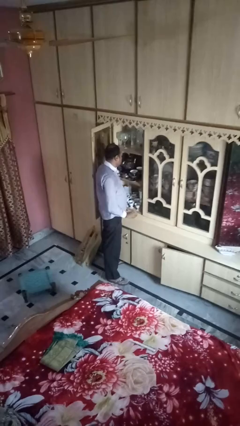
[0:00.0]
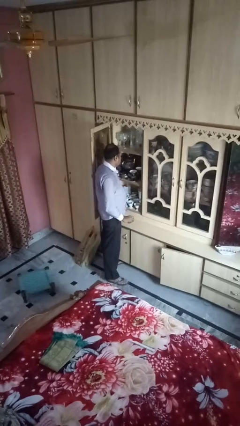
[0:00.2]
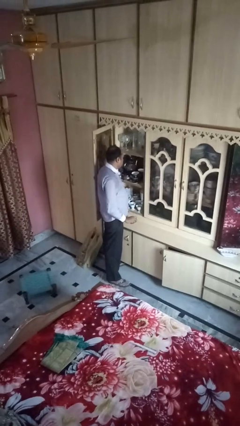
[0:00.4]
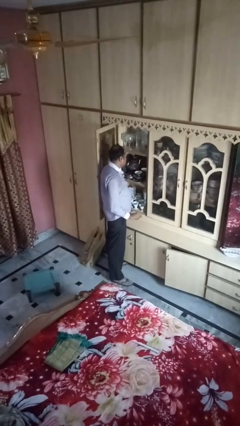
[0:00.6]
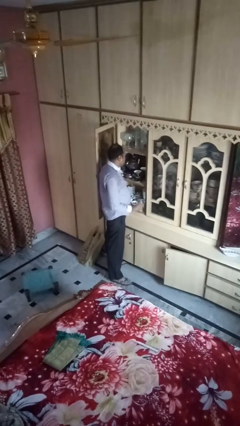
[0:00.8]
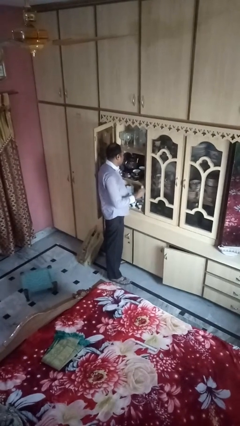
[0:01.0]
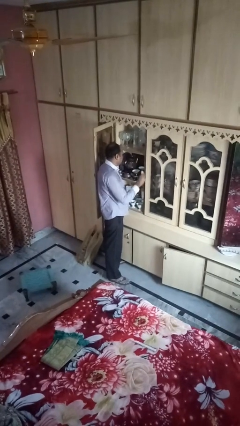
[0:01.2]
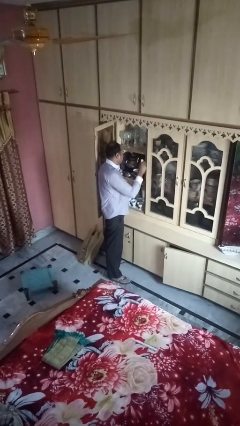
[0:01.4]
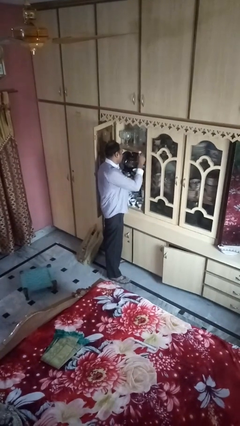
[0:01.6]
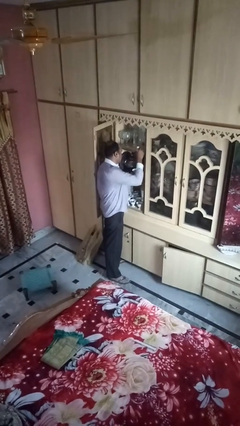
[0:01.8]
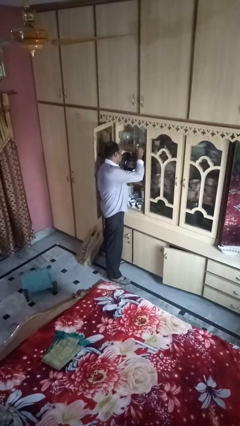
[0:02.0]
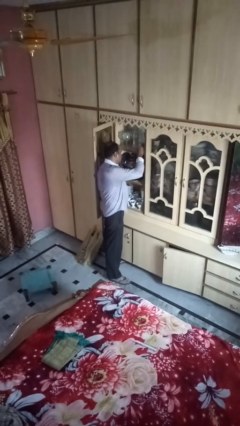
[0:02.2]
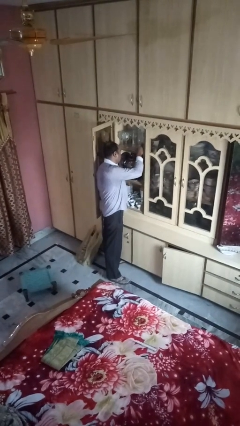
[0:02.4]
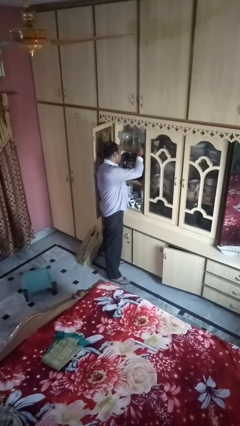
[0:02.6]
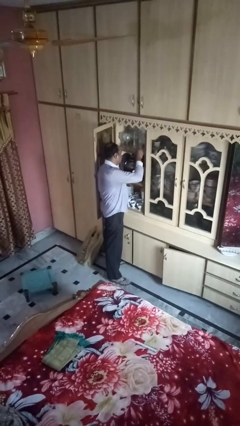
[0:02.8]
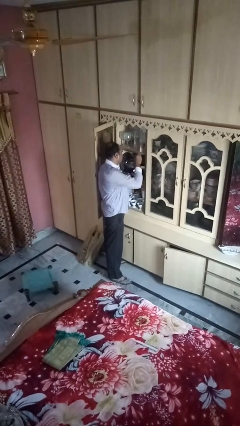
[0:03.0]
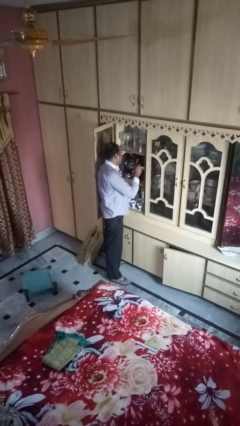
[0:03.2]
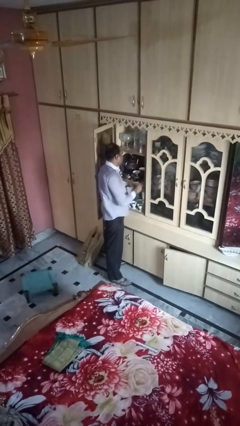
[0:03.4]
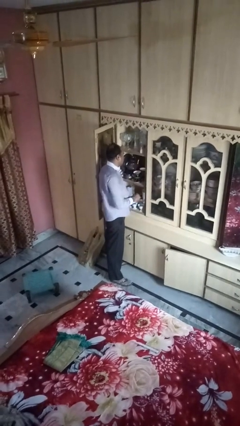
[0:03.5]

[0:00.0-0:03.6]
person puts down object on shelf

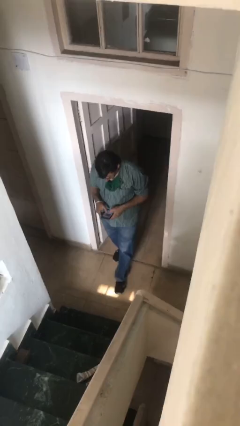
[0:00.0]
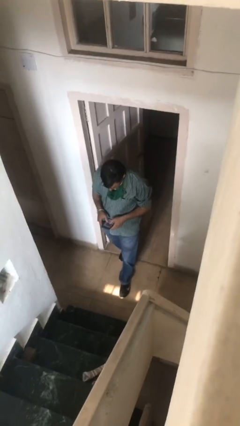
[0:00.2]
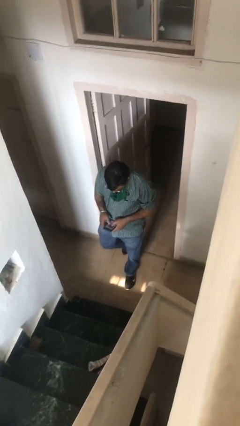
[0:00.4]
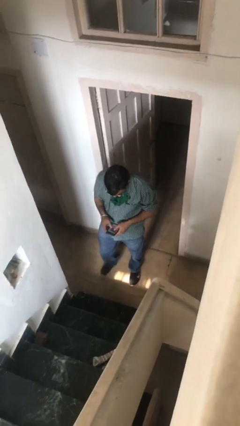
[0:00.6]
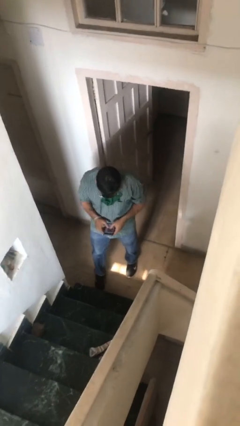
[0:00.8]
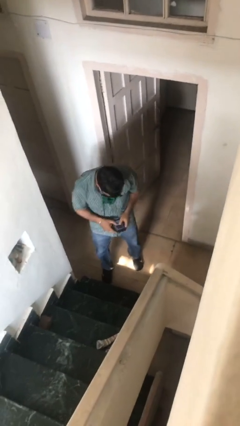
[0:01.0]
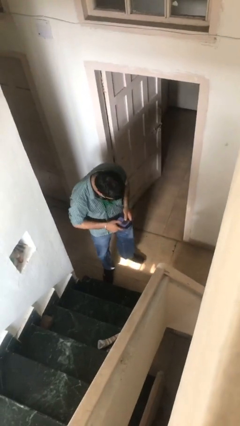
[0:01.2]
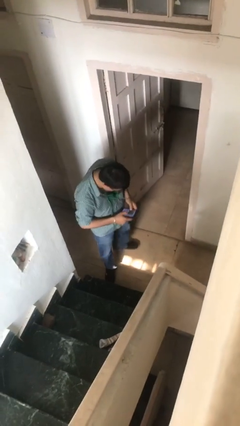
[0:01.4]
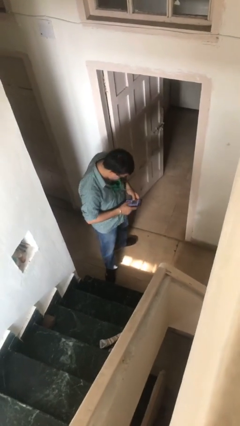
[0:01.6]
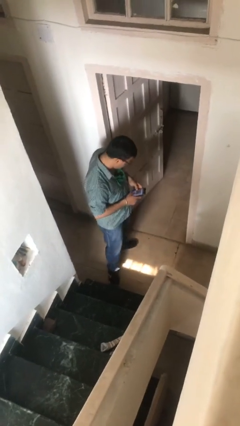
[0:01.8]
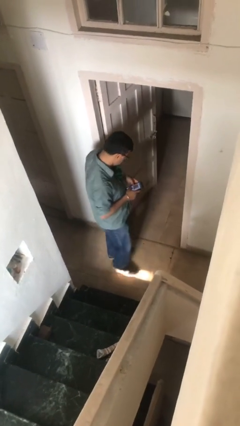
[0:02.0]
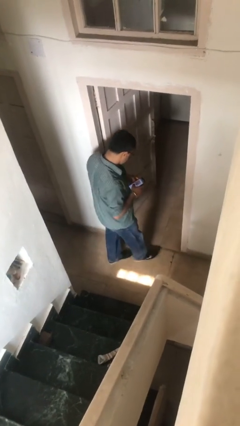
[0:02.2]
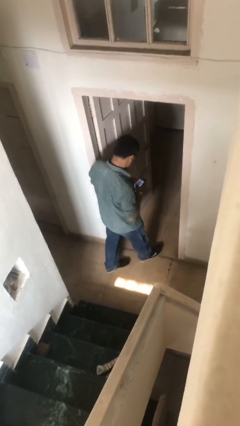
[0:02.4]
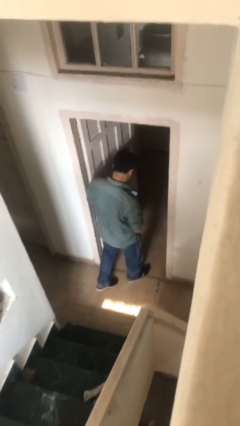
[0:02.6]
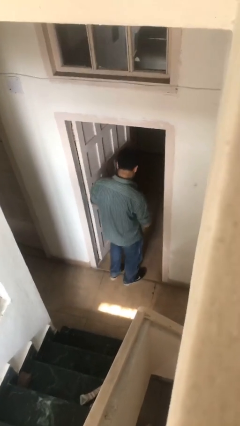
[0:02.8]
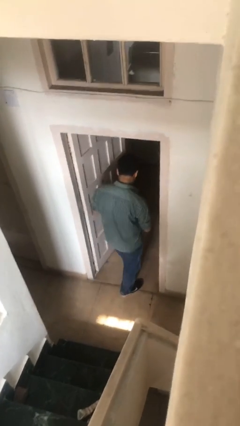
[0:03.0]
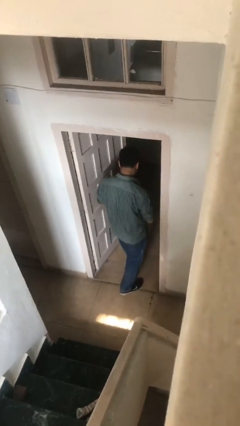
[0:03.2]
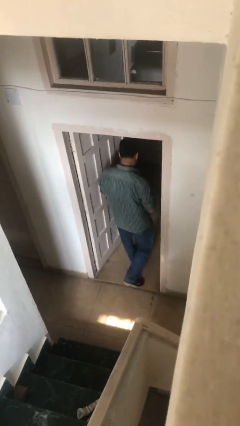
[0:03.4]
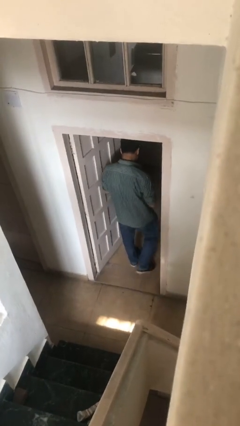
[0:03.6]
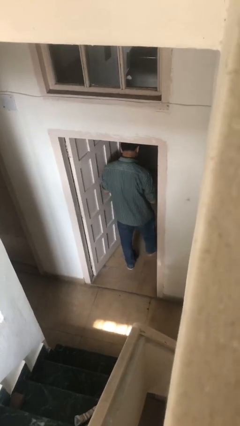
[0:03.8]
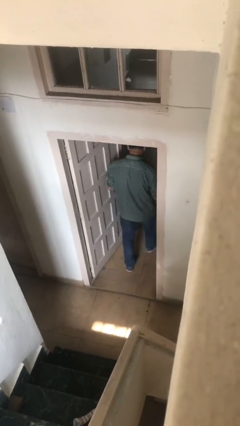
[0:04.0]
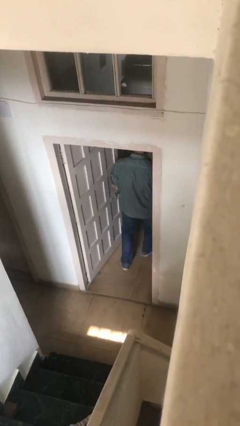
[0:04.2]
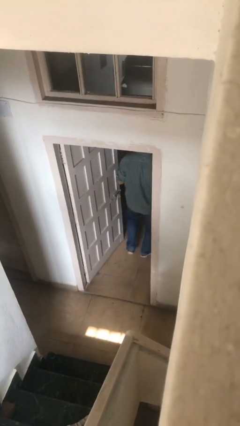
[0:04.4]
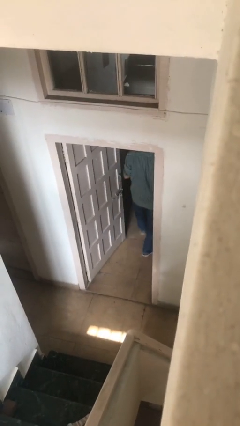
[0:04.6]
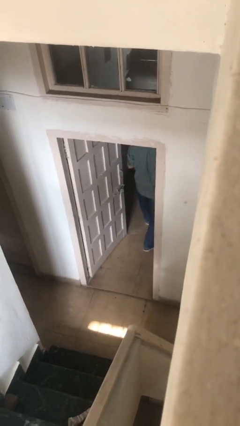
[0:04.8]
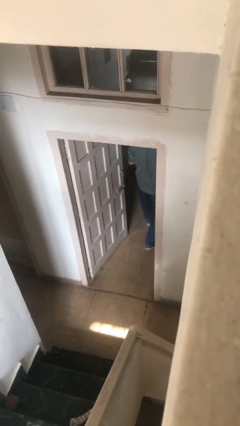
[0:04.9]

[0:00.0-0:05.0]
person exits scene through structure
